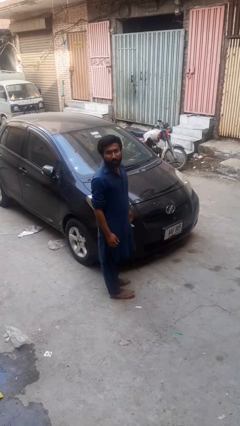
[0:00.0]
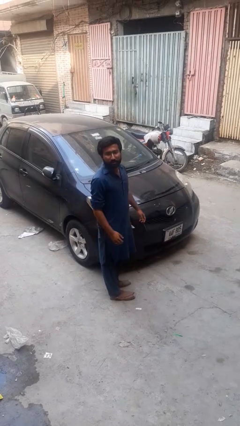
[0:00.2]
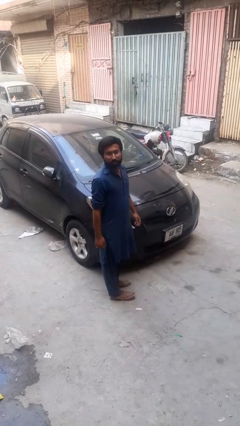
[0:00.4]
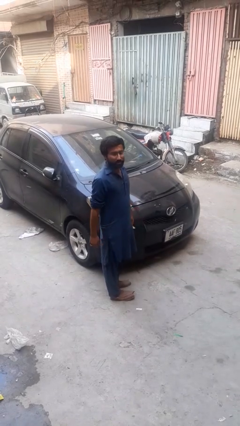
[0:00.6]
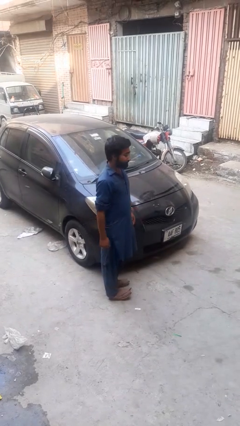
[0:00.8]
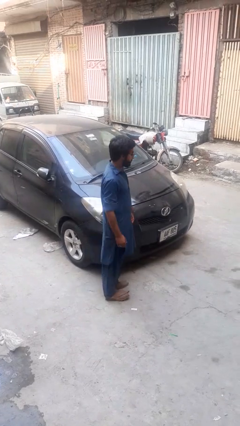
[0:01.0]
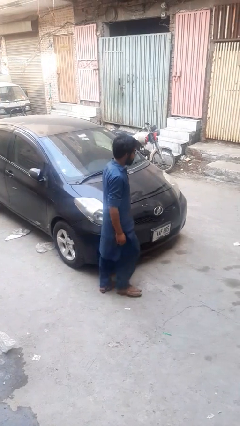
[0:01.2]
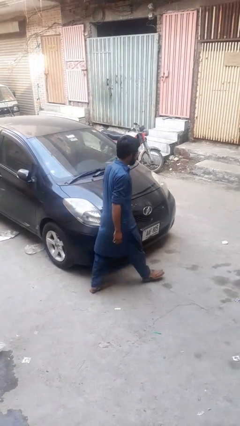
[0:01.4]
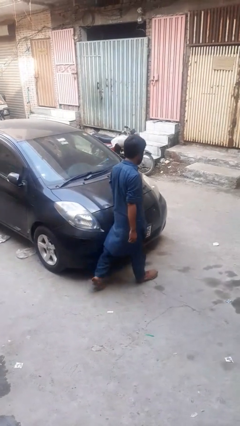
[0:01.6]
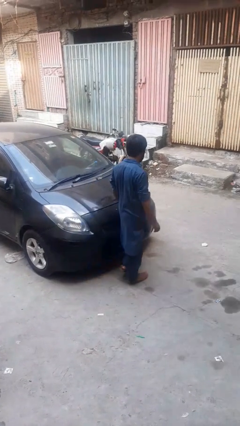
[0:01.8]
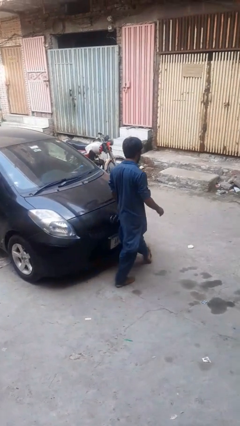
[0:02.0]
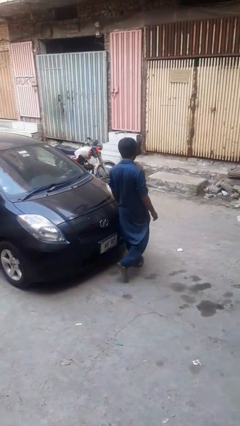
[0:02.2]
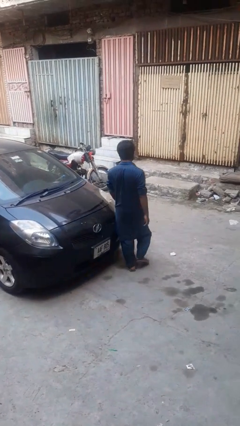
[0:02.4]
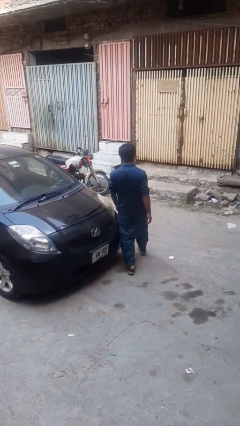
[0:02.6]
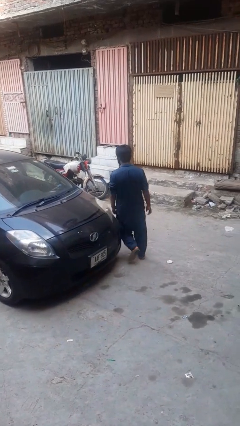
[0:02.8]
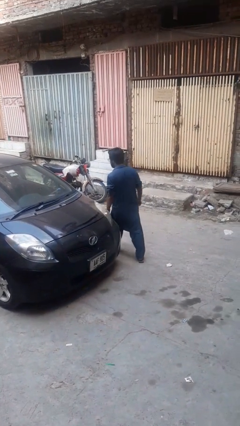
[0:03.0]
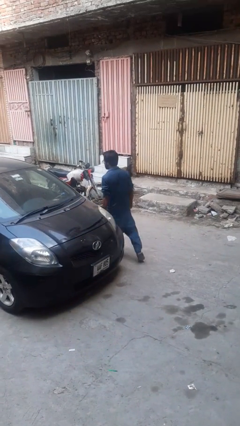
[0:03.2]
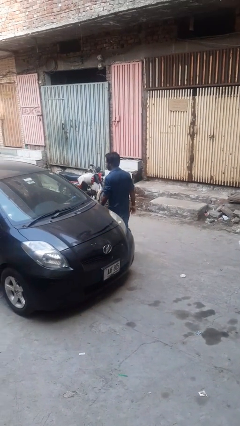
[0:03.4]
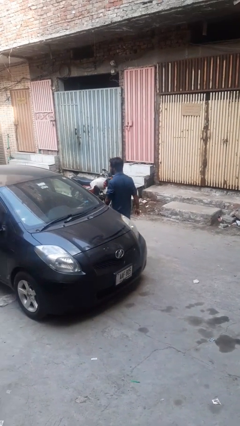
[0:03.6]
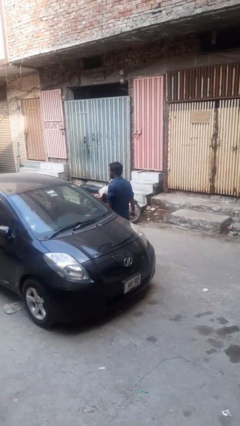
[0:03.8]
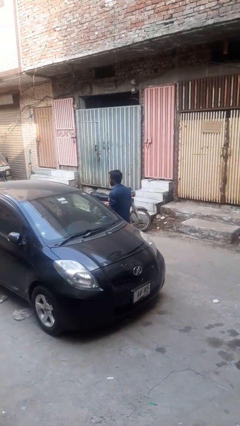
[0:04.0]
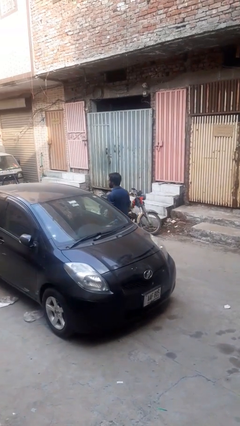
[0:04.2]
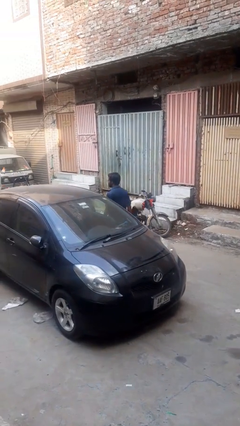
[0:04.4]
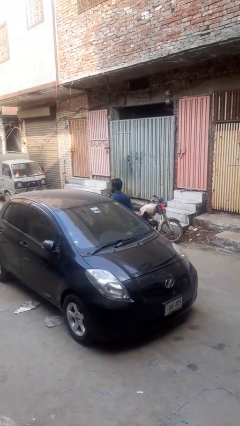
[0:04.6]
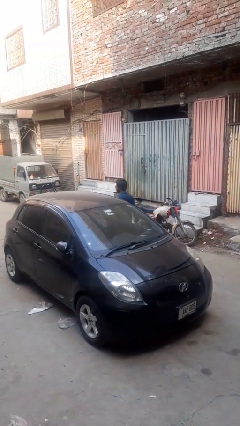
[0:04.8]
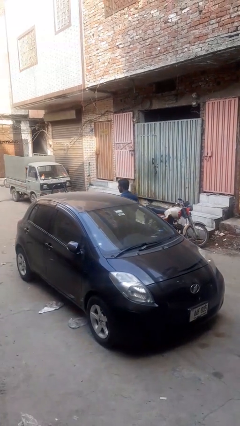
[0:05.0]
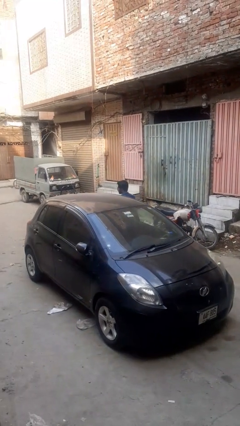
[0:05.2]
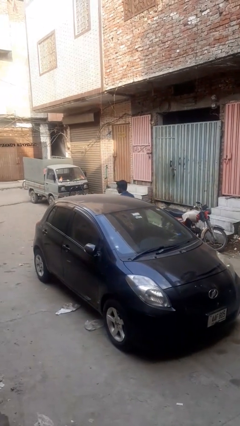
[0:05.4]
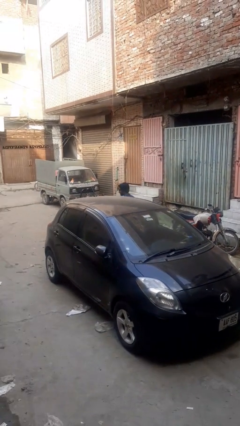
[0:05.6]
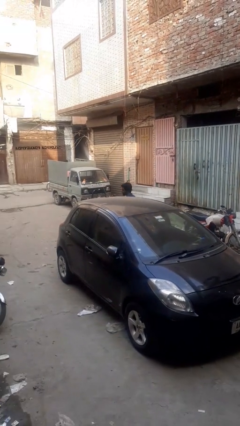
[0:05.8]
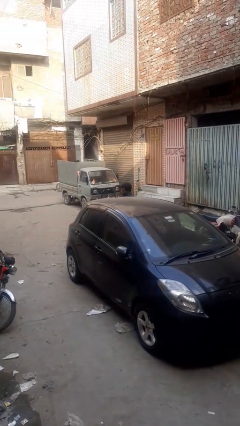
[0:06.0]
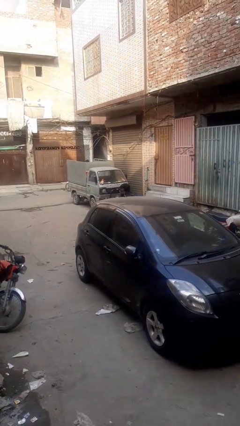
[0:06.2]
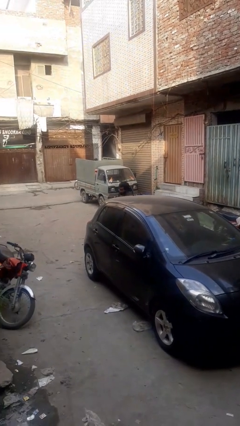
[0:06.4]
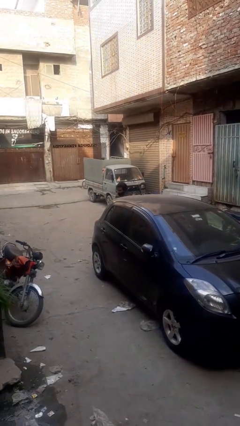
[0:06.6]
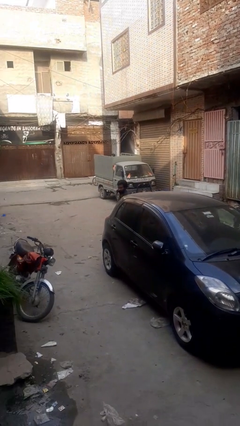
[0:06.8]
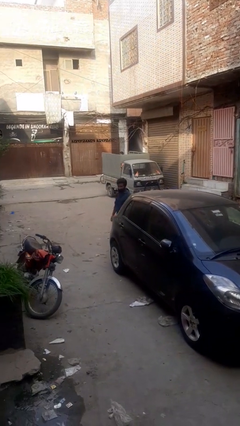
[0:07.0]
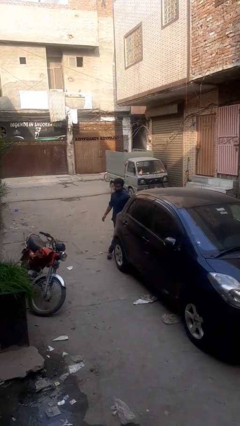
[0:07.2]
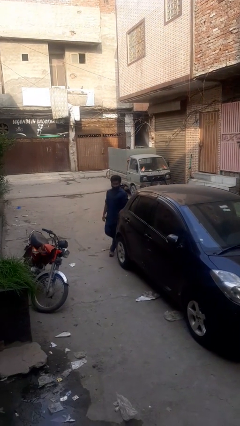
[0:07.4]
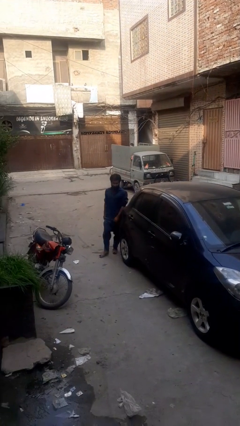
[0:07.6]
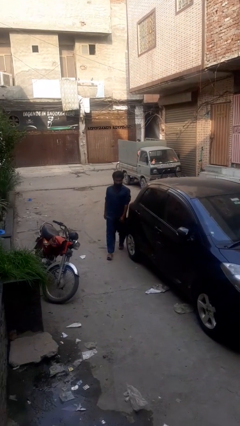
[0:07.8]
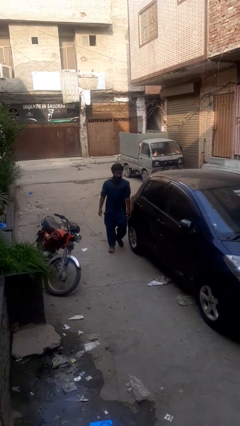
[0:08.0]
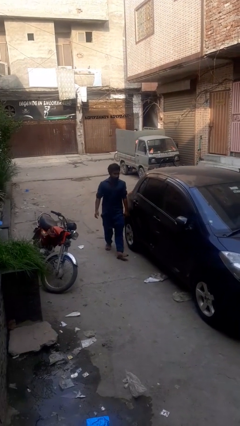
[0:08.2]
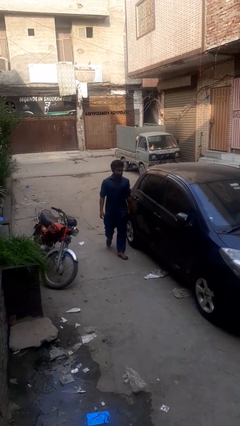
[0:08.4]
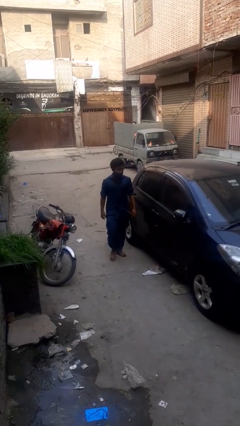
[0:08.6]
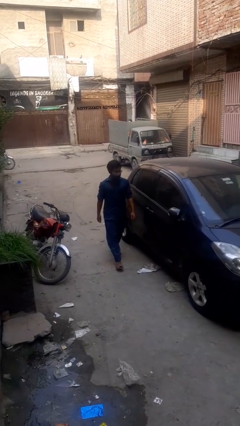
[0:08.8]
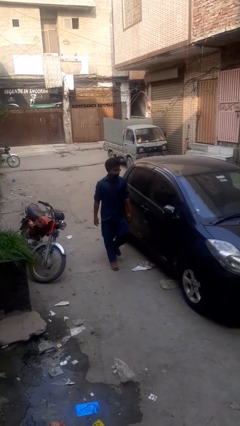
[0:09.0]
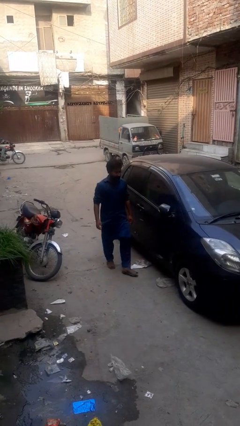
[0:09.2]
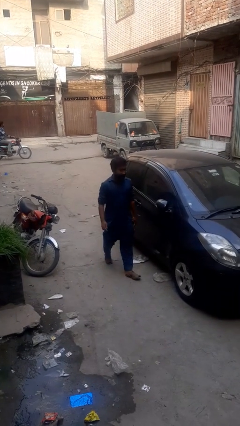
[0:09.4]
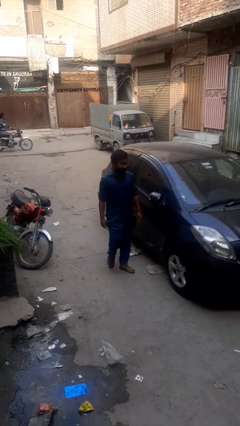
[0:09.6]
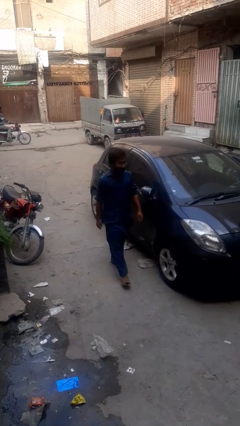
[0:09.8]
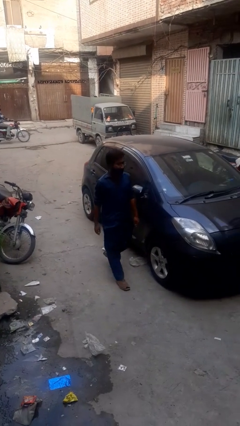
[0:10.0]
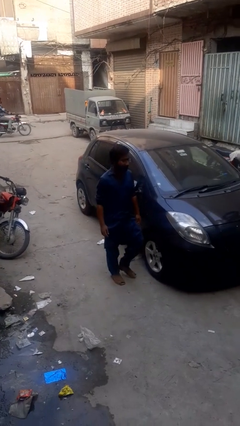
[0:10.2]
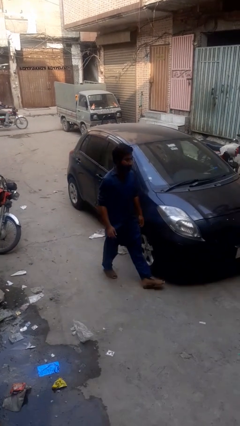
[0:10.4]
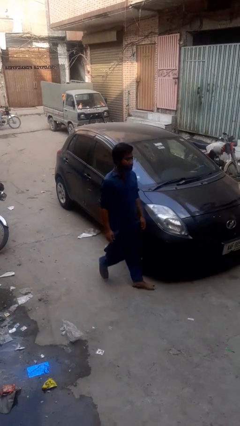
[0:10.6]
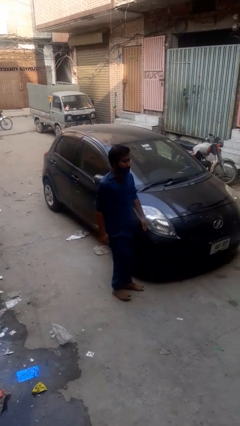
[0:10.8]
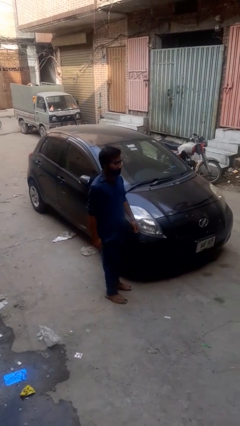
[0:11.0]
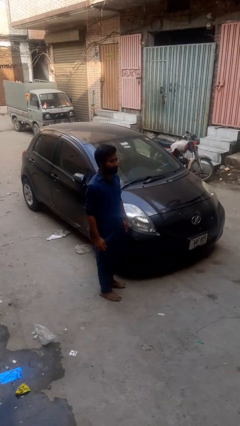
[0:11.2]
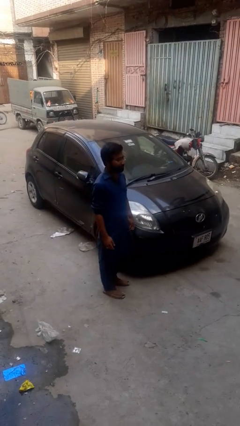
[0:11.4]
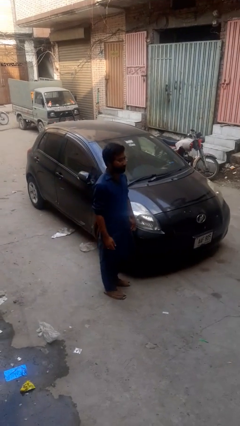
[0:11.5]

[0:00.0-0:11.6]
person walks around car

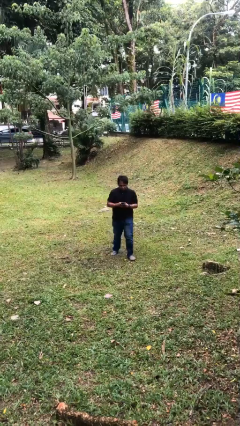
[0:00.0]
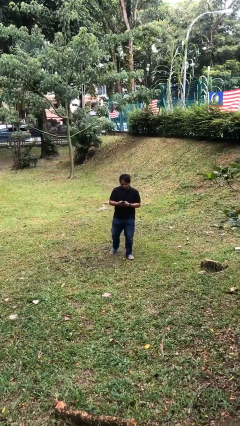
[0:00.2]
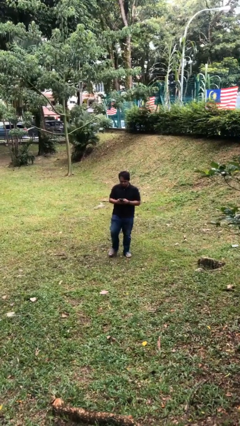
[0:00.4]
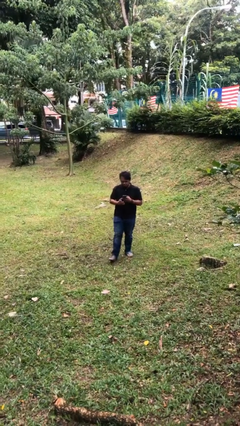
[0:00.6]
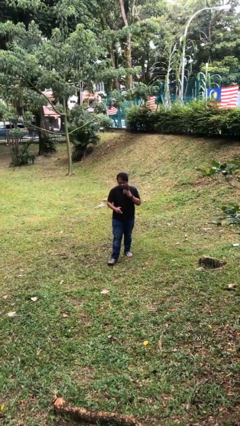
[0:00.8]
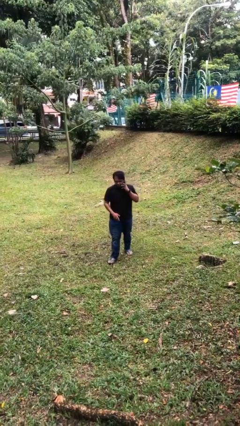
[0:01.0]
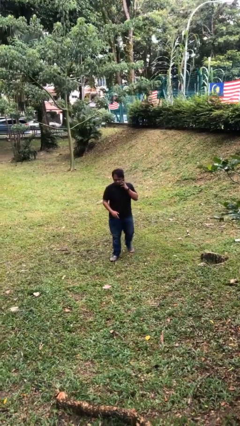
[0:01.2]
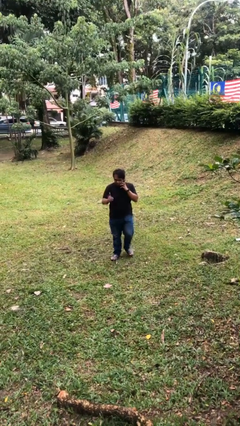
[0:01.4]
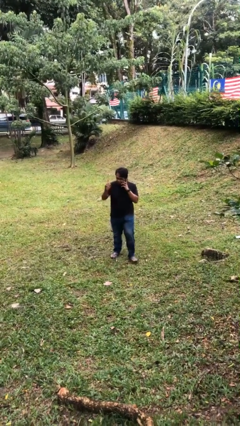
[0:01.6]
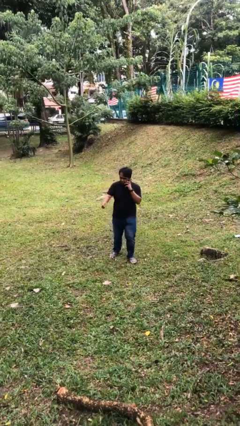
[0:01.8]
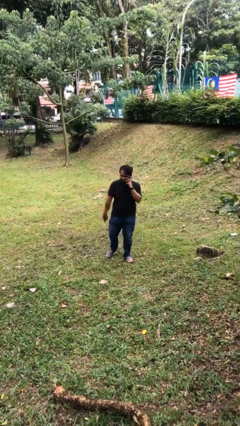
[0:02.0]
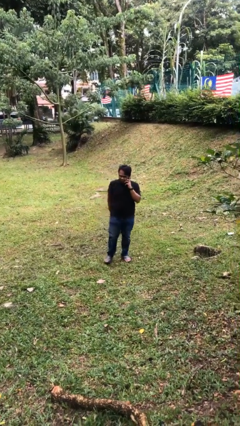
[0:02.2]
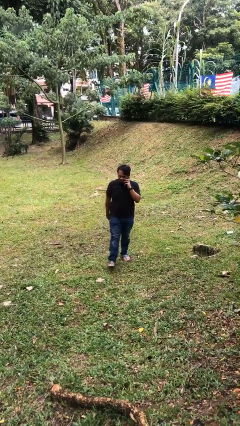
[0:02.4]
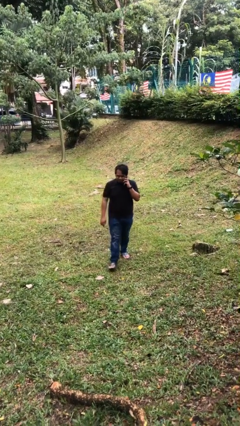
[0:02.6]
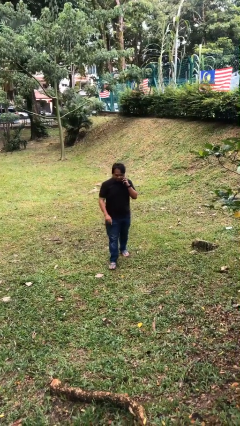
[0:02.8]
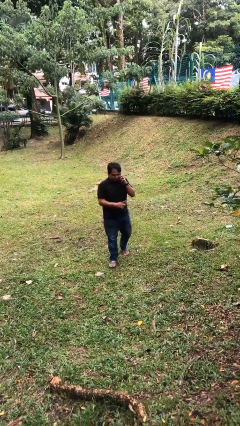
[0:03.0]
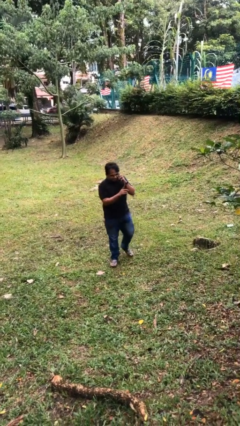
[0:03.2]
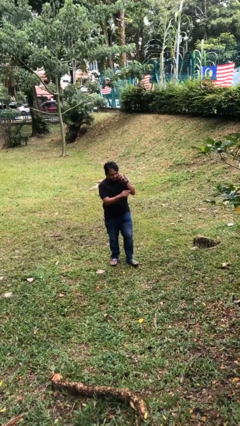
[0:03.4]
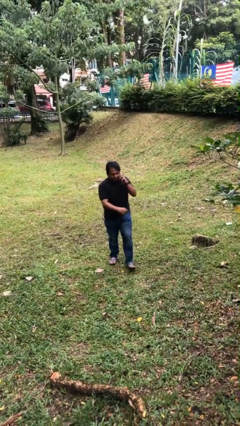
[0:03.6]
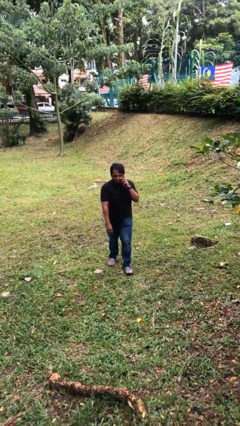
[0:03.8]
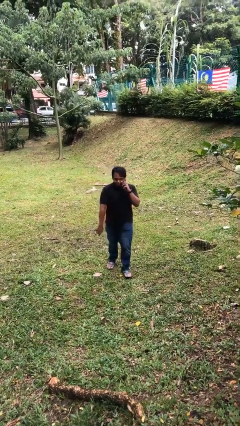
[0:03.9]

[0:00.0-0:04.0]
person talks on phone

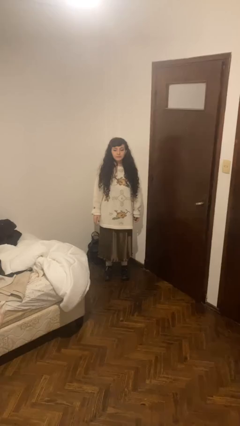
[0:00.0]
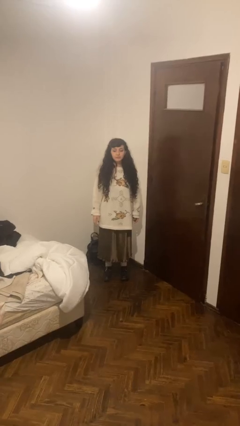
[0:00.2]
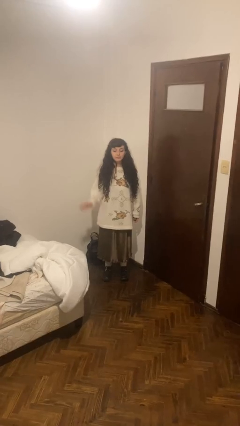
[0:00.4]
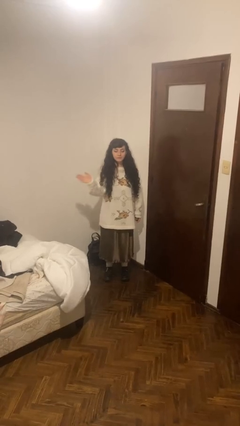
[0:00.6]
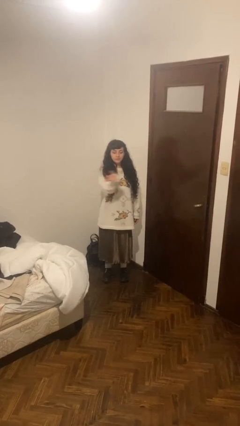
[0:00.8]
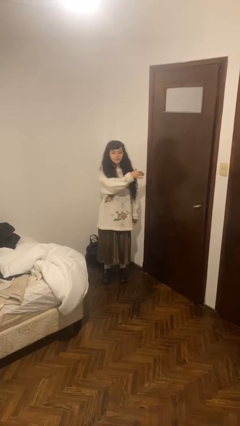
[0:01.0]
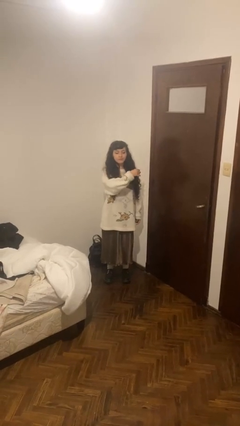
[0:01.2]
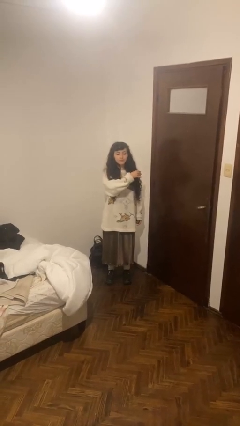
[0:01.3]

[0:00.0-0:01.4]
person gestures swipe left

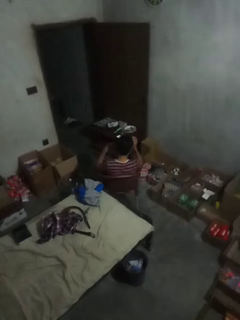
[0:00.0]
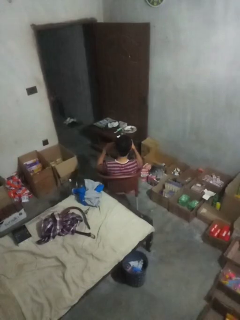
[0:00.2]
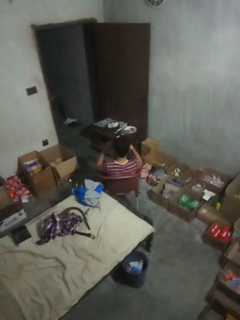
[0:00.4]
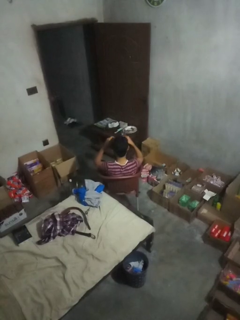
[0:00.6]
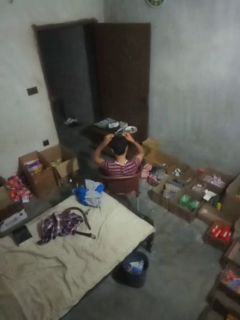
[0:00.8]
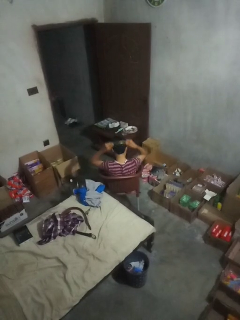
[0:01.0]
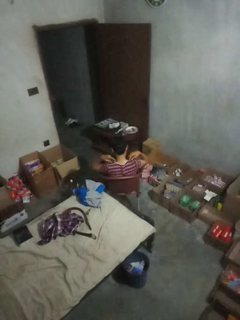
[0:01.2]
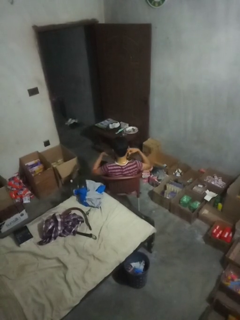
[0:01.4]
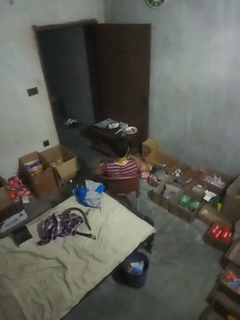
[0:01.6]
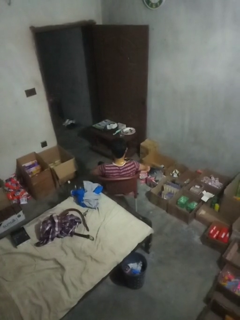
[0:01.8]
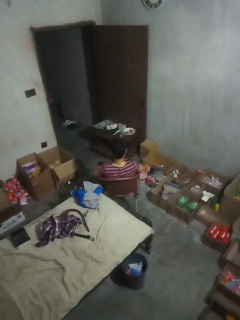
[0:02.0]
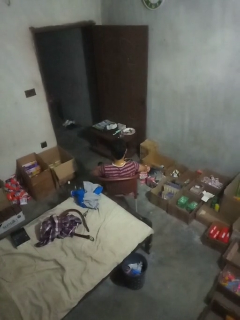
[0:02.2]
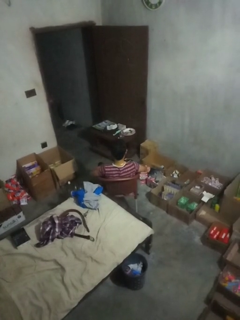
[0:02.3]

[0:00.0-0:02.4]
person puts on necklace
